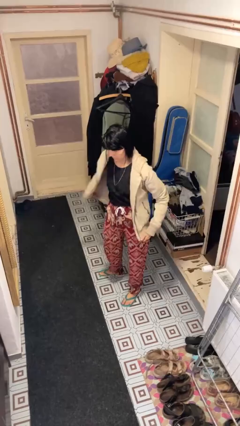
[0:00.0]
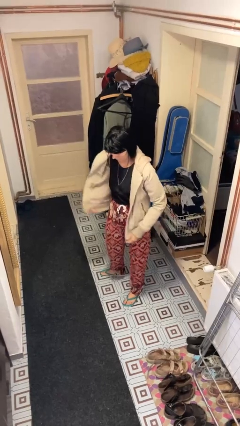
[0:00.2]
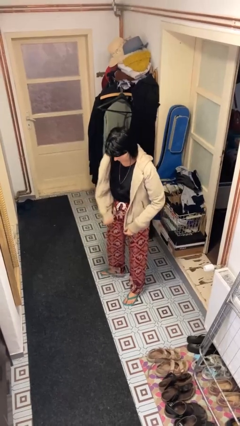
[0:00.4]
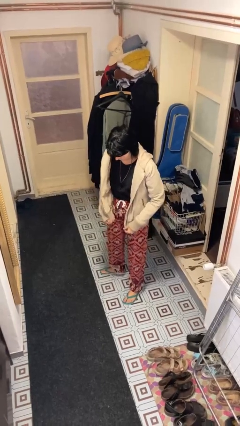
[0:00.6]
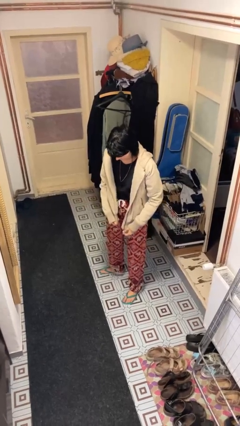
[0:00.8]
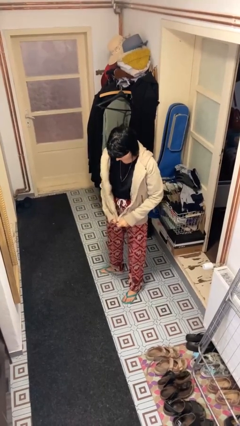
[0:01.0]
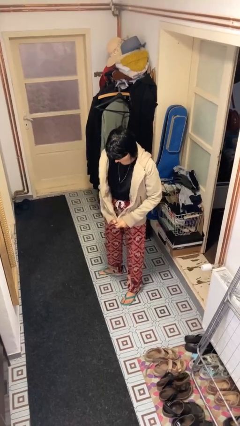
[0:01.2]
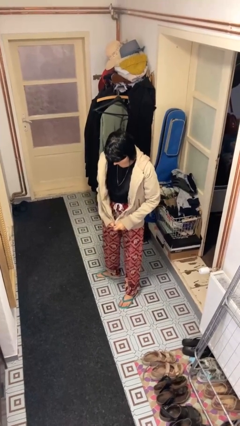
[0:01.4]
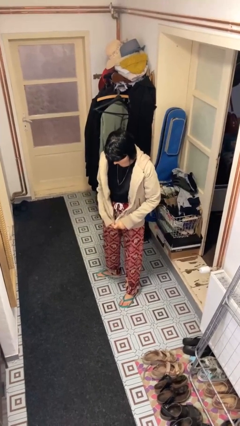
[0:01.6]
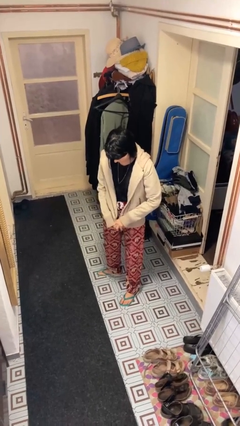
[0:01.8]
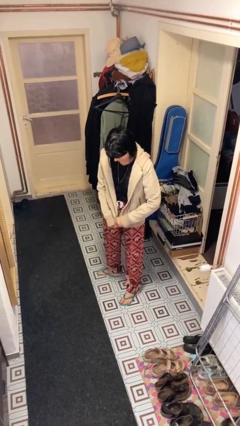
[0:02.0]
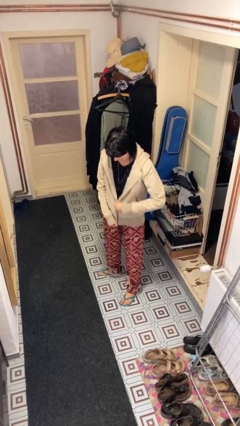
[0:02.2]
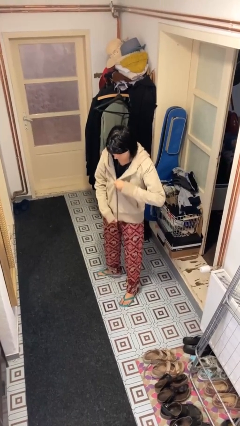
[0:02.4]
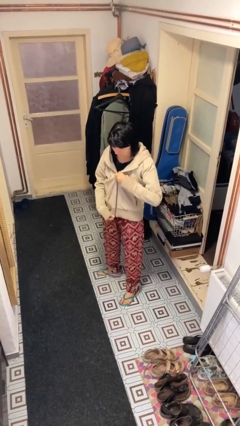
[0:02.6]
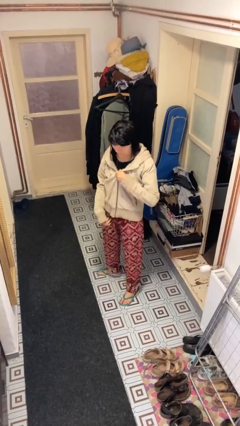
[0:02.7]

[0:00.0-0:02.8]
person zips up jacket

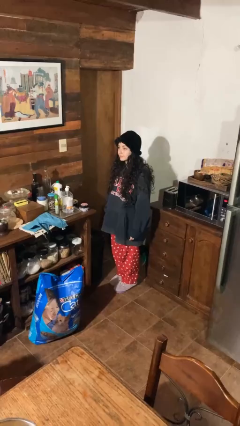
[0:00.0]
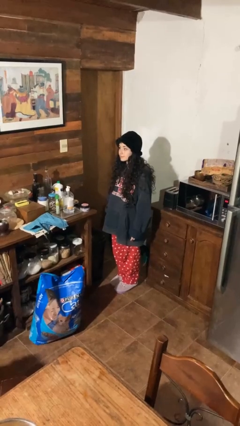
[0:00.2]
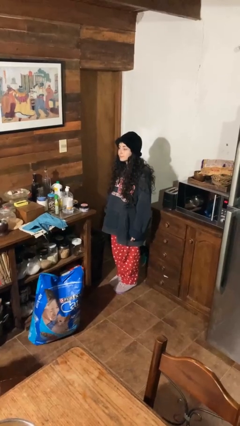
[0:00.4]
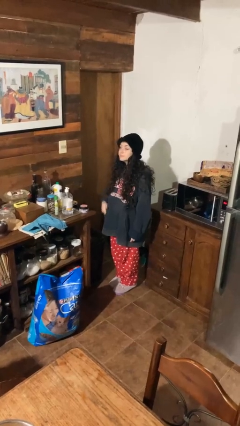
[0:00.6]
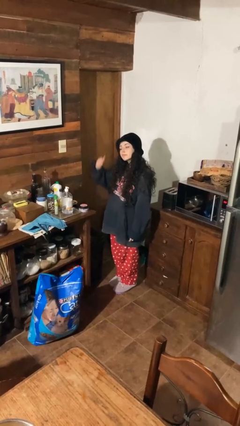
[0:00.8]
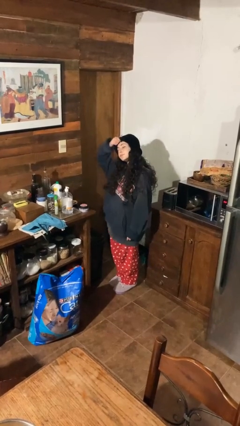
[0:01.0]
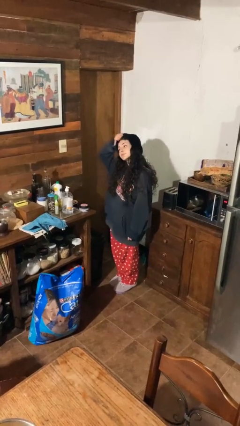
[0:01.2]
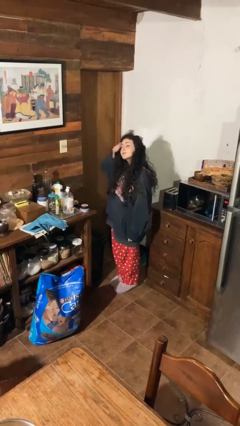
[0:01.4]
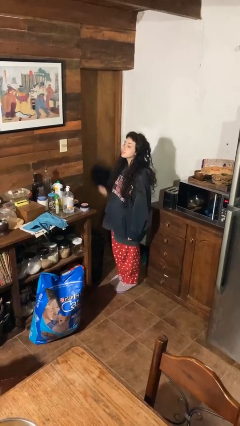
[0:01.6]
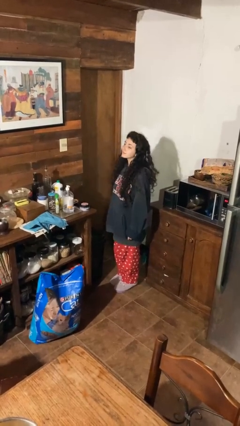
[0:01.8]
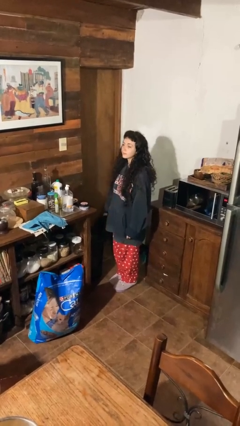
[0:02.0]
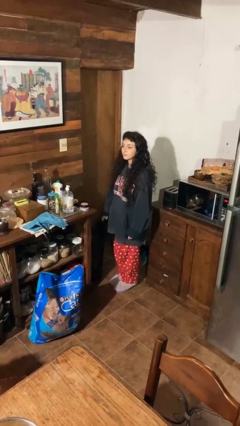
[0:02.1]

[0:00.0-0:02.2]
person takes off hat

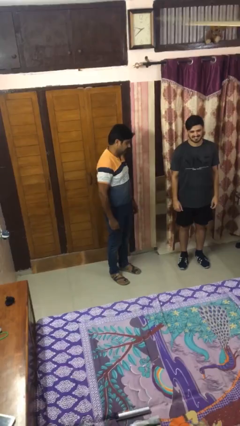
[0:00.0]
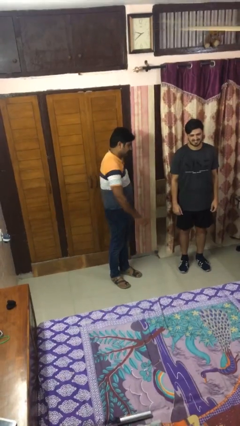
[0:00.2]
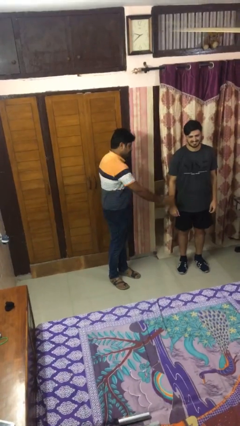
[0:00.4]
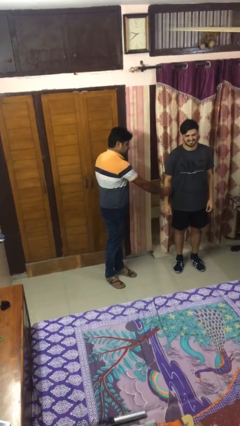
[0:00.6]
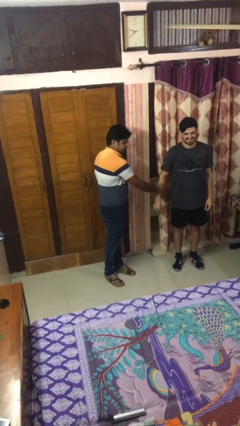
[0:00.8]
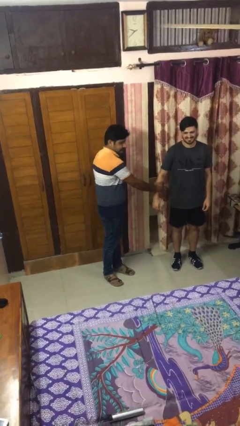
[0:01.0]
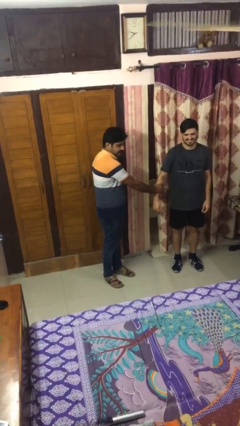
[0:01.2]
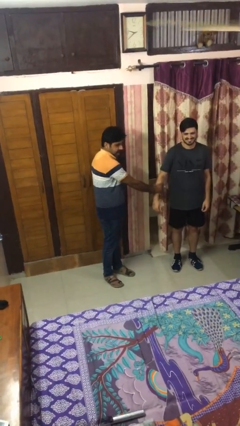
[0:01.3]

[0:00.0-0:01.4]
person grabs person by forearm

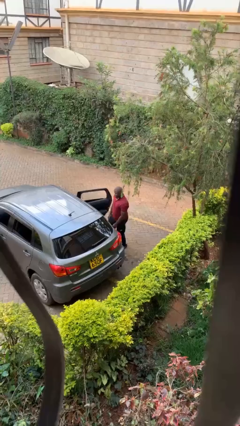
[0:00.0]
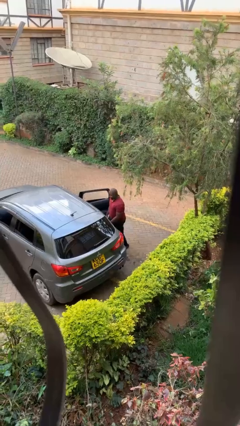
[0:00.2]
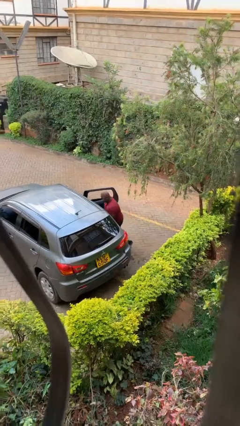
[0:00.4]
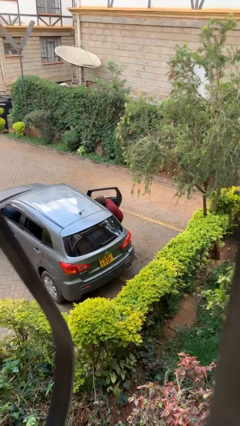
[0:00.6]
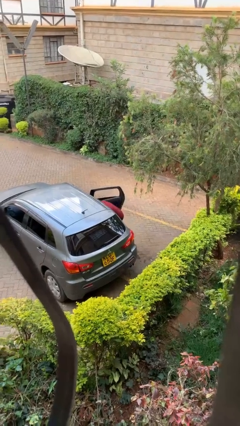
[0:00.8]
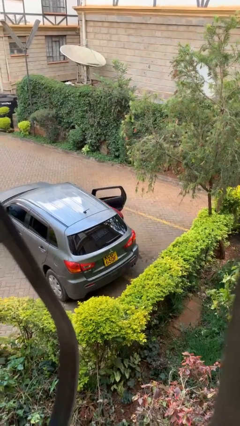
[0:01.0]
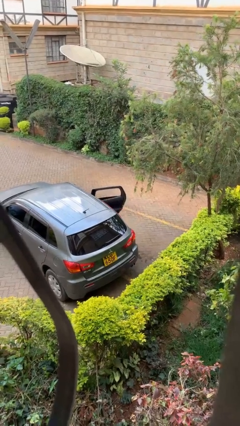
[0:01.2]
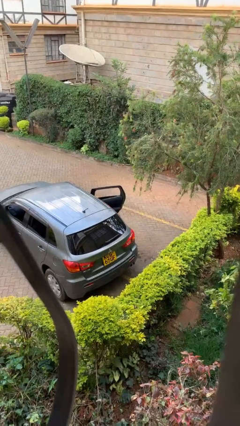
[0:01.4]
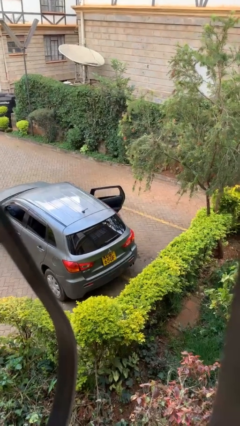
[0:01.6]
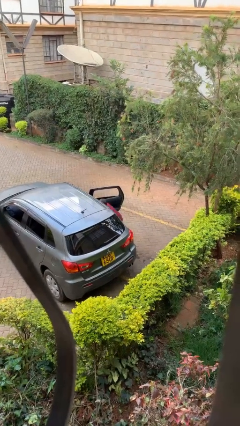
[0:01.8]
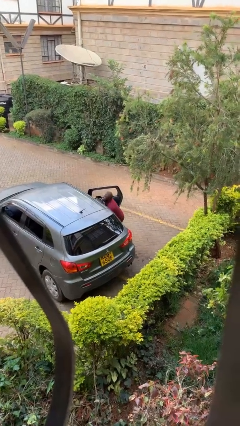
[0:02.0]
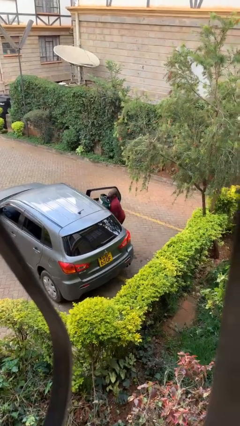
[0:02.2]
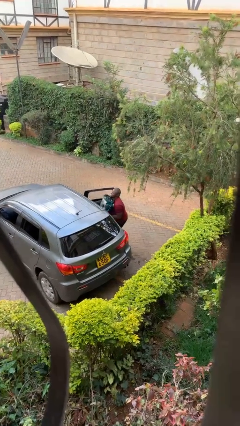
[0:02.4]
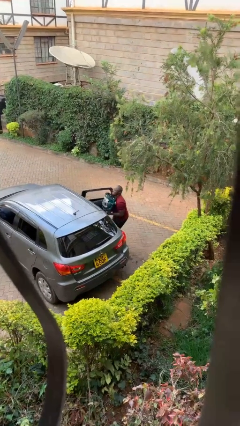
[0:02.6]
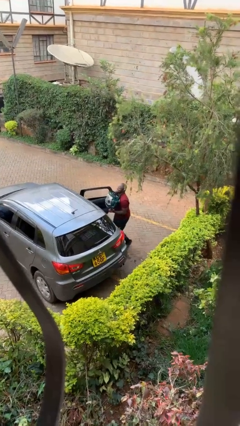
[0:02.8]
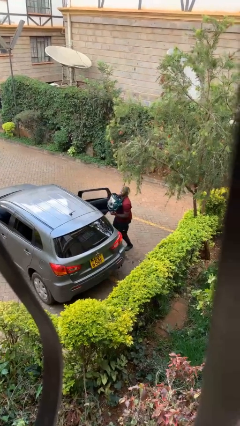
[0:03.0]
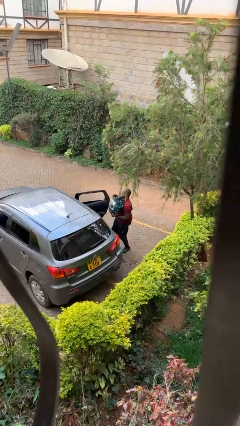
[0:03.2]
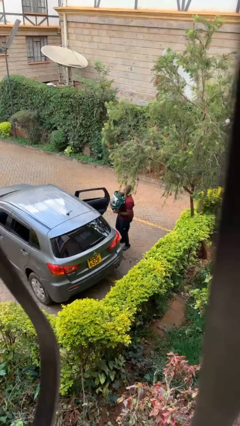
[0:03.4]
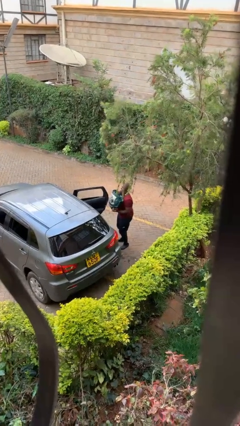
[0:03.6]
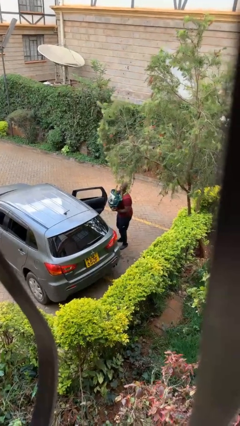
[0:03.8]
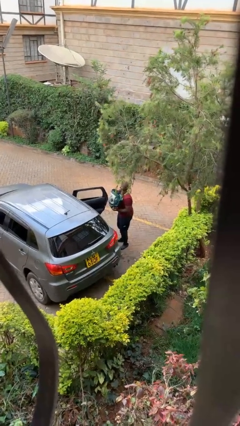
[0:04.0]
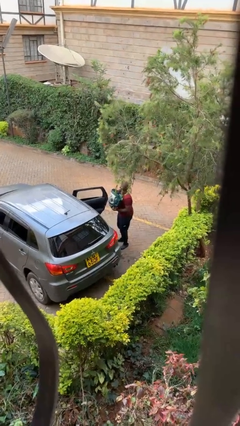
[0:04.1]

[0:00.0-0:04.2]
person unloads car

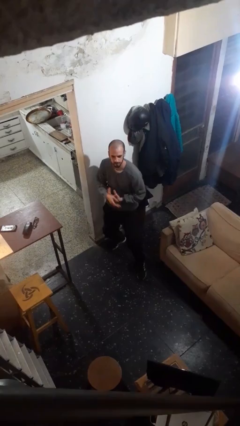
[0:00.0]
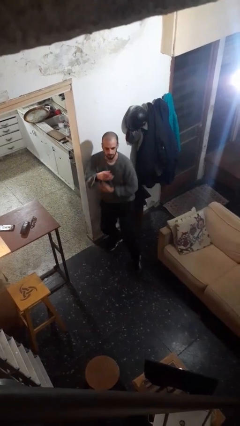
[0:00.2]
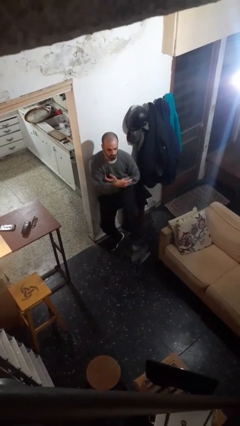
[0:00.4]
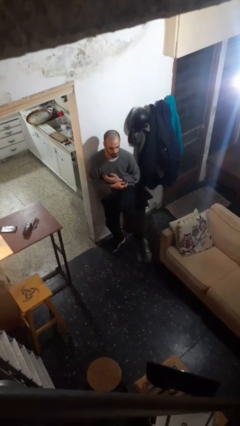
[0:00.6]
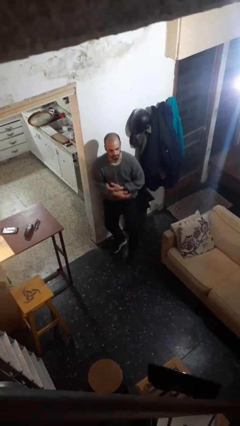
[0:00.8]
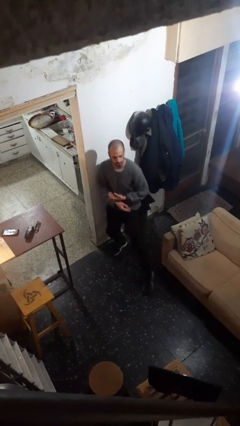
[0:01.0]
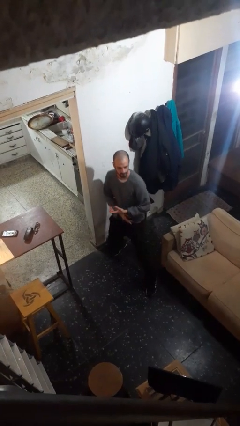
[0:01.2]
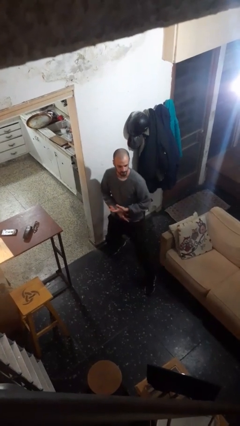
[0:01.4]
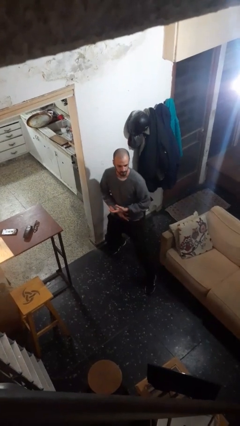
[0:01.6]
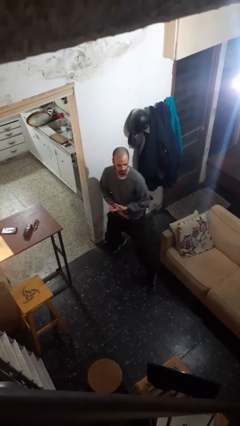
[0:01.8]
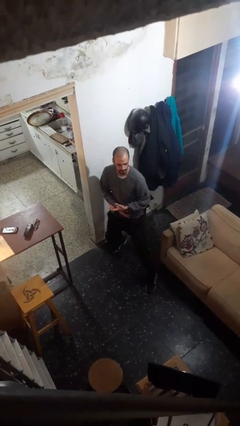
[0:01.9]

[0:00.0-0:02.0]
person karate kicks

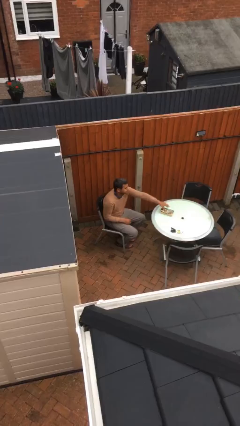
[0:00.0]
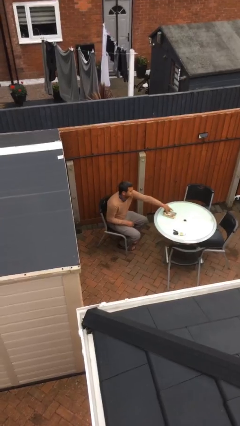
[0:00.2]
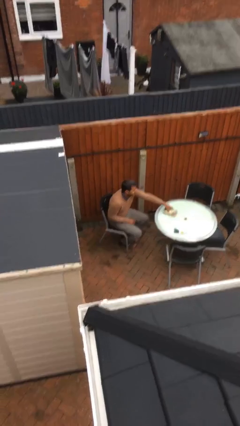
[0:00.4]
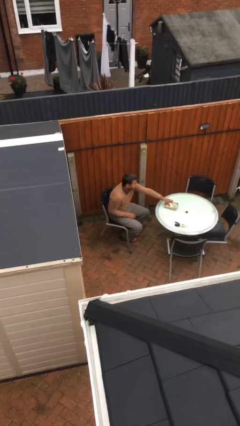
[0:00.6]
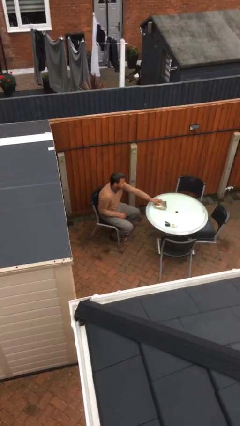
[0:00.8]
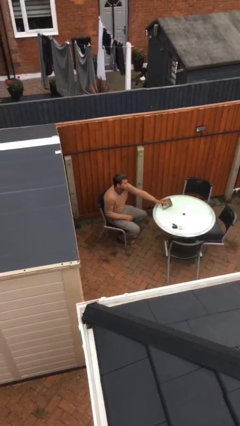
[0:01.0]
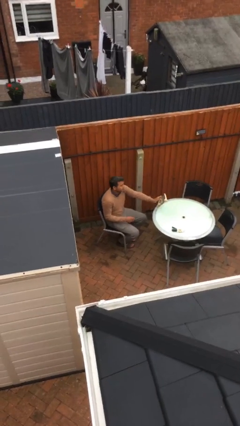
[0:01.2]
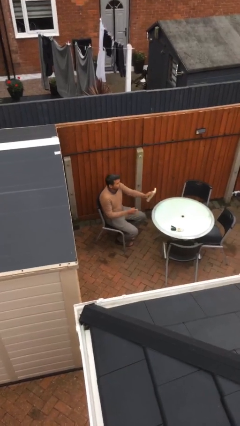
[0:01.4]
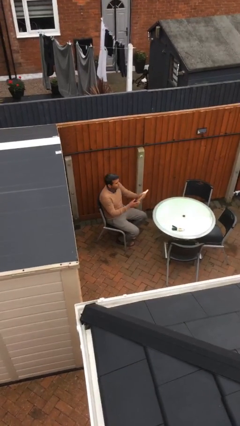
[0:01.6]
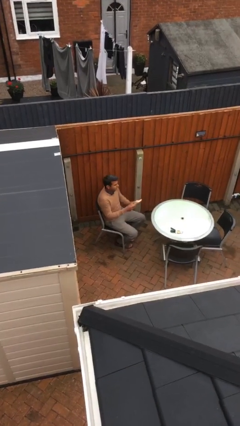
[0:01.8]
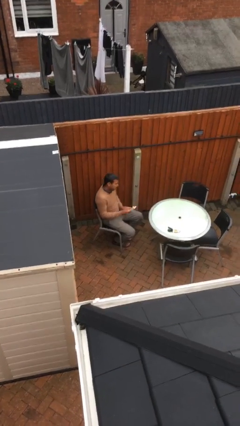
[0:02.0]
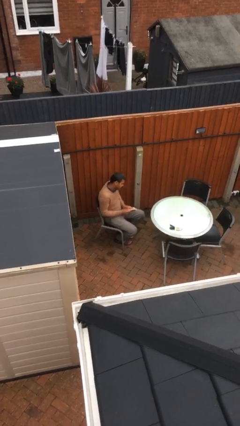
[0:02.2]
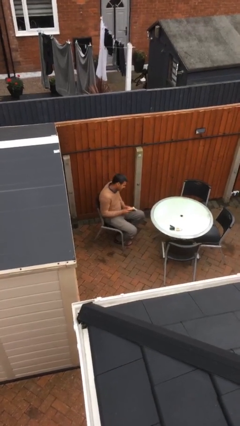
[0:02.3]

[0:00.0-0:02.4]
person picks up object from table

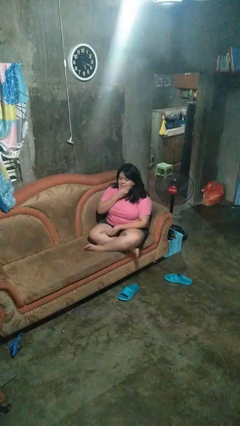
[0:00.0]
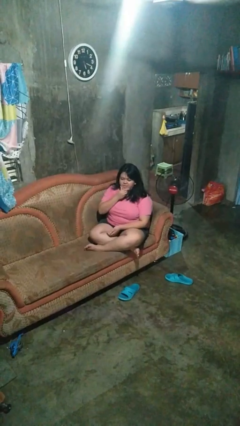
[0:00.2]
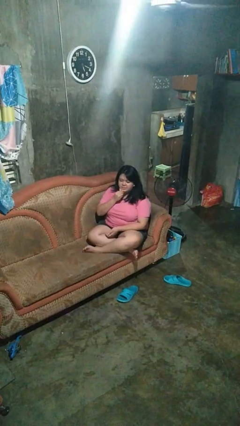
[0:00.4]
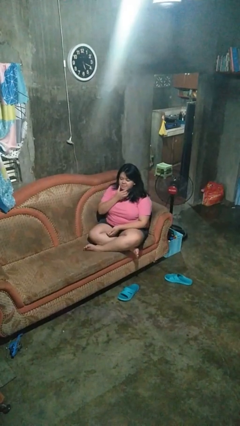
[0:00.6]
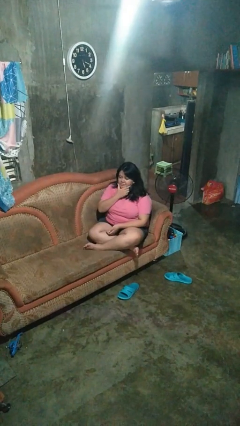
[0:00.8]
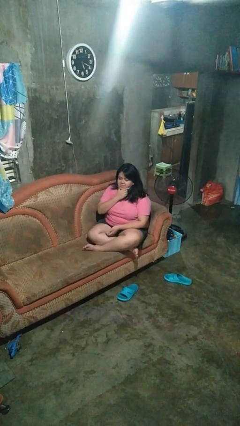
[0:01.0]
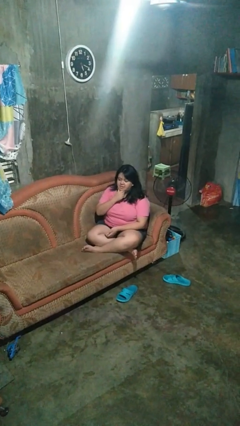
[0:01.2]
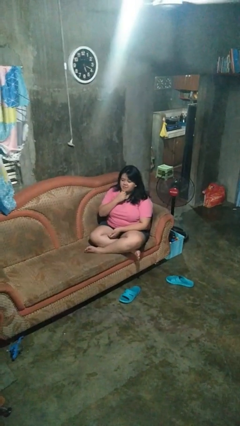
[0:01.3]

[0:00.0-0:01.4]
person strokes chin
